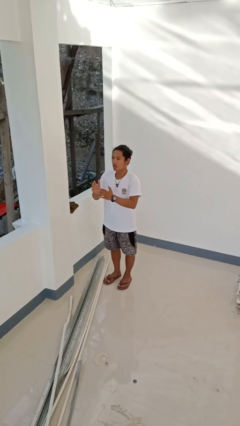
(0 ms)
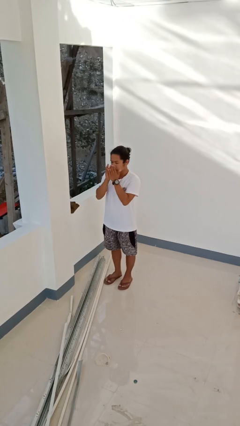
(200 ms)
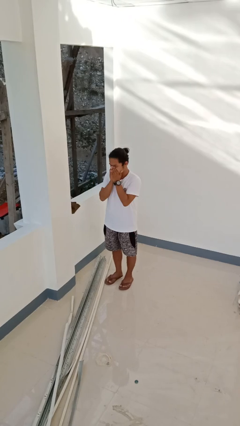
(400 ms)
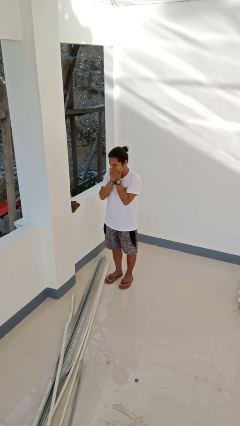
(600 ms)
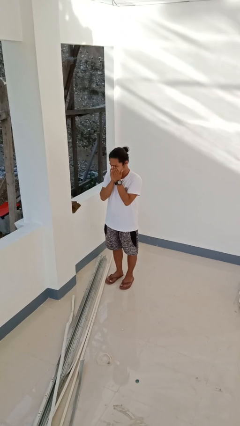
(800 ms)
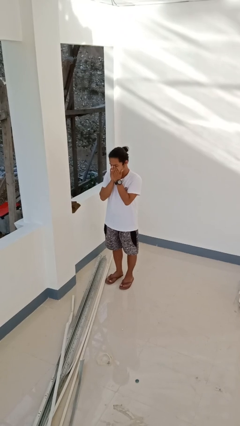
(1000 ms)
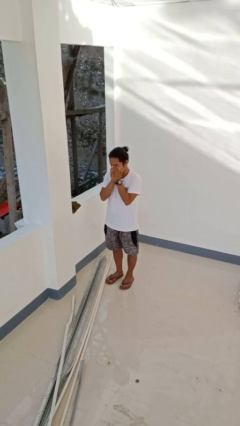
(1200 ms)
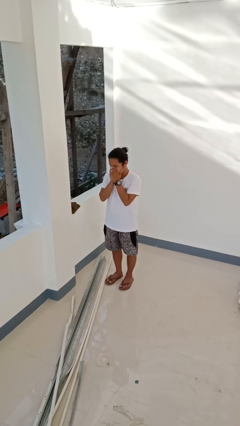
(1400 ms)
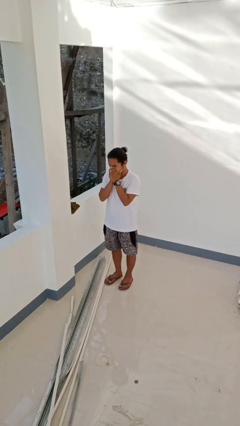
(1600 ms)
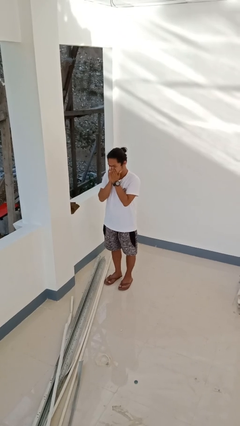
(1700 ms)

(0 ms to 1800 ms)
person sneezes into hand

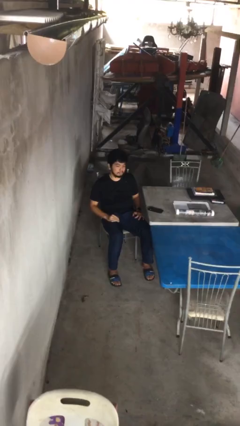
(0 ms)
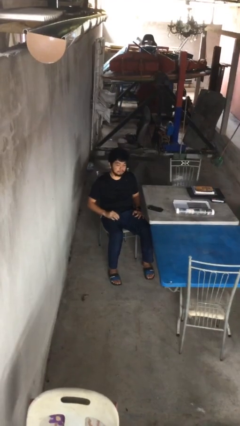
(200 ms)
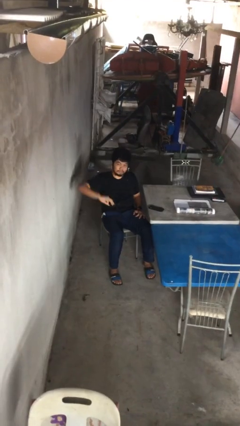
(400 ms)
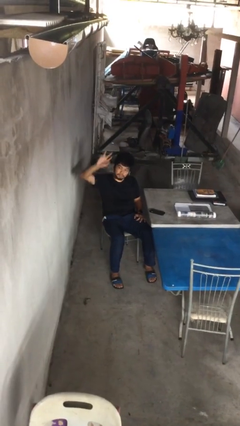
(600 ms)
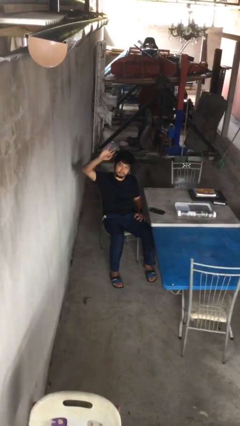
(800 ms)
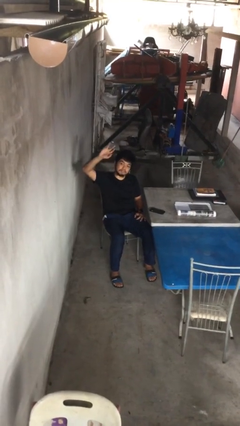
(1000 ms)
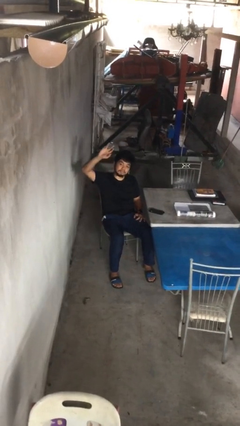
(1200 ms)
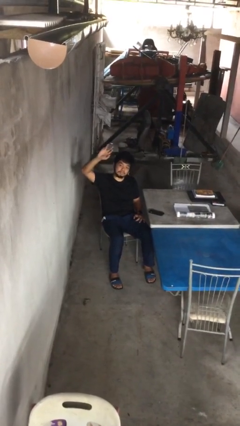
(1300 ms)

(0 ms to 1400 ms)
person gestures swipe up

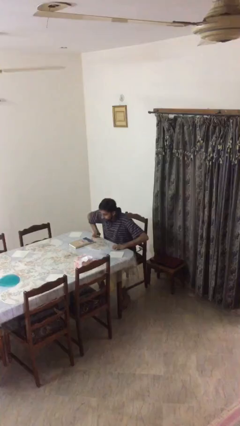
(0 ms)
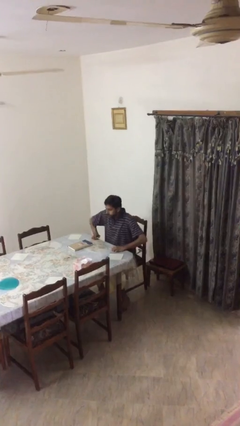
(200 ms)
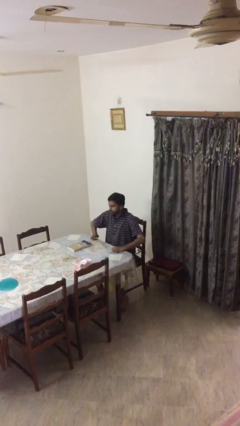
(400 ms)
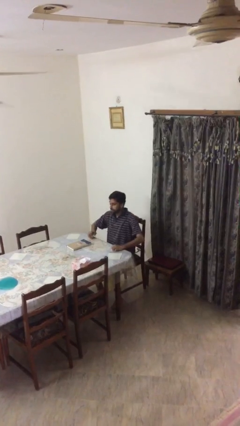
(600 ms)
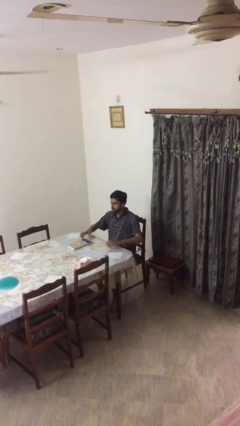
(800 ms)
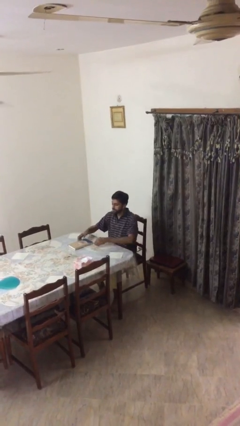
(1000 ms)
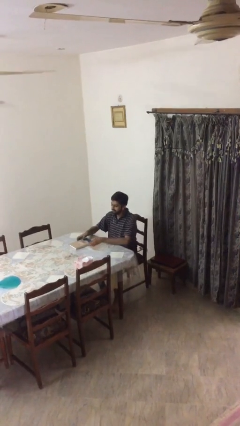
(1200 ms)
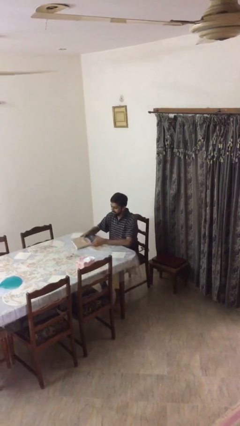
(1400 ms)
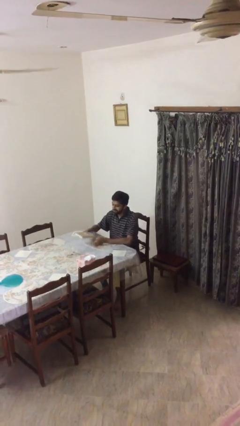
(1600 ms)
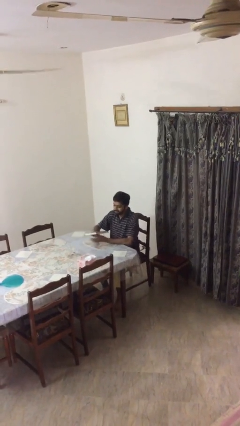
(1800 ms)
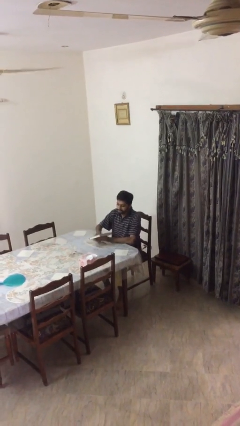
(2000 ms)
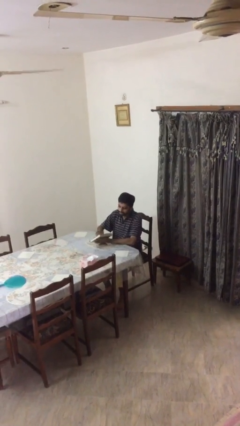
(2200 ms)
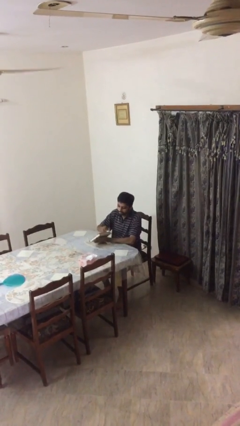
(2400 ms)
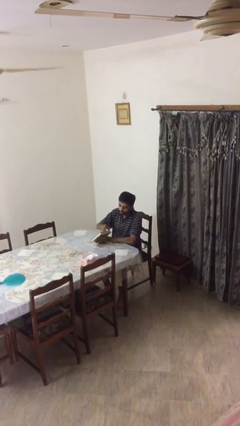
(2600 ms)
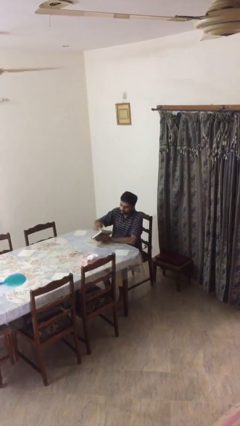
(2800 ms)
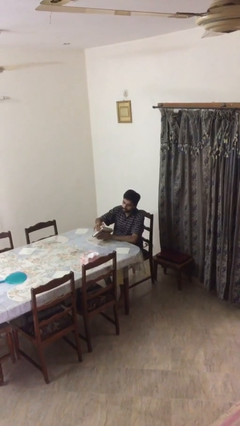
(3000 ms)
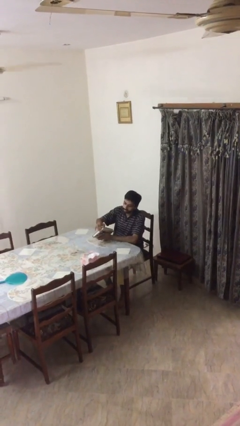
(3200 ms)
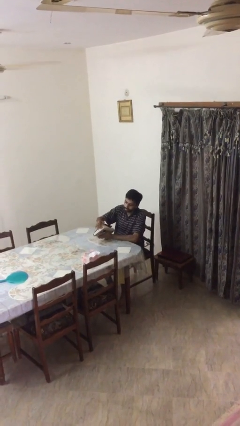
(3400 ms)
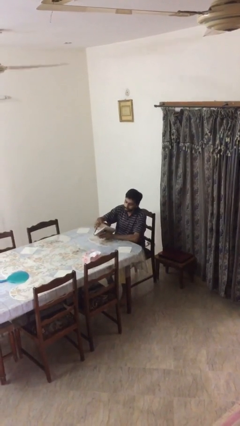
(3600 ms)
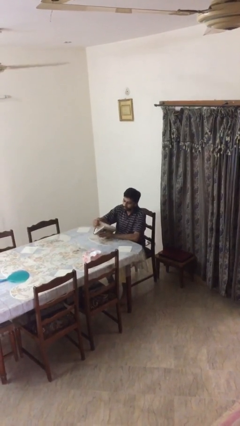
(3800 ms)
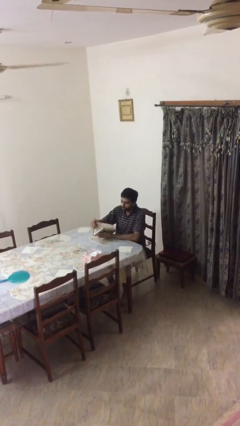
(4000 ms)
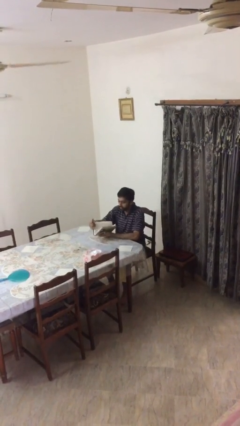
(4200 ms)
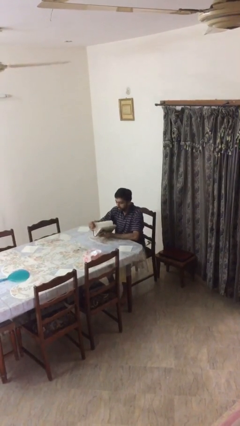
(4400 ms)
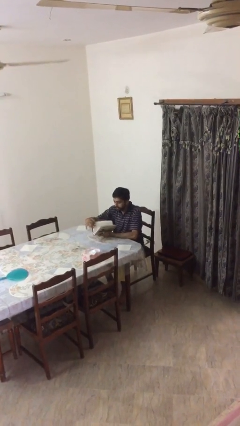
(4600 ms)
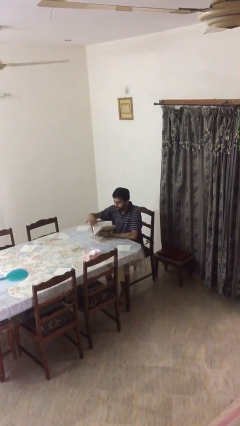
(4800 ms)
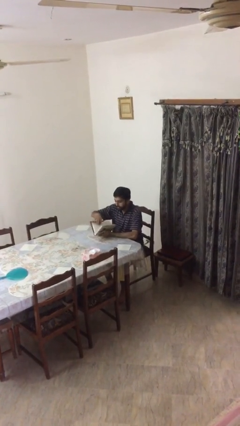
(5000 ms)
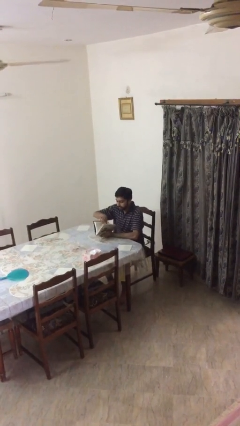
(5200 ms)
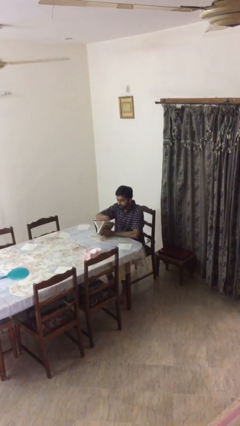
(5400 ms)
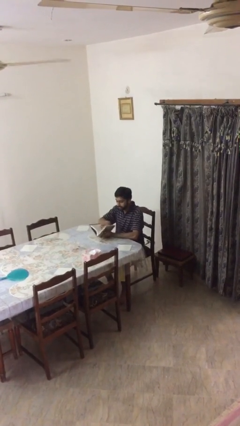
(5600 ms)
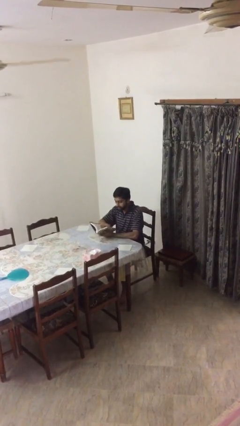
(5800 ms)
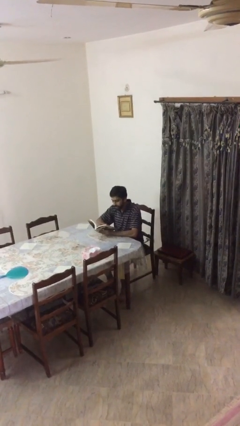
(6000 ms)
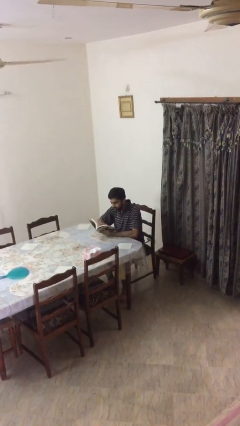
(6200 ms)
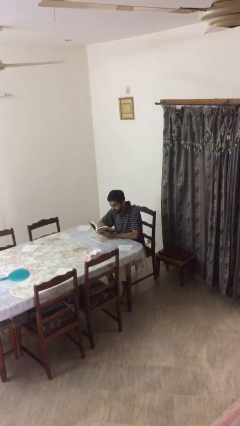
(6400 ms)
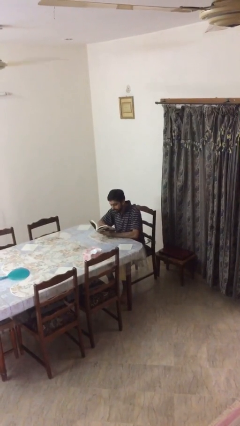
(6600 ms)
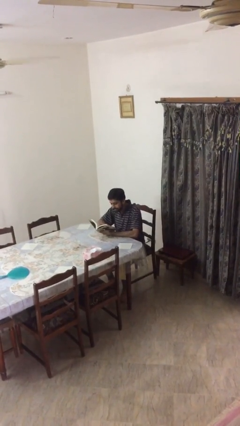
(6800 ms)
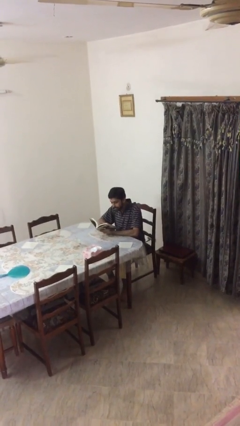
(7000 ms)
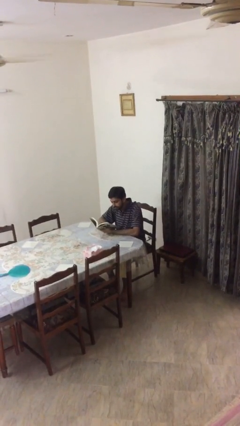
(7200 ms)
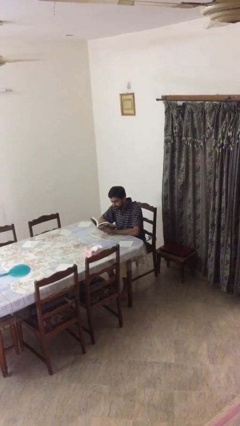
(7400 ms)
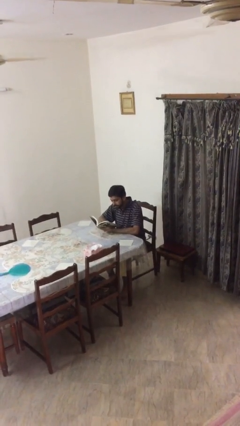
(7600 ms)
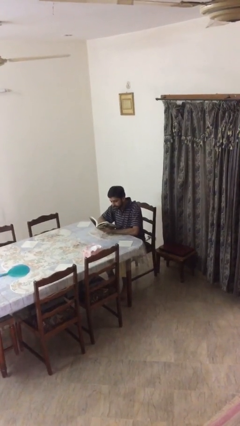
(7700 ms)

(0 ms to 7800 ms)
person reads document

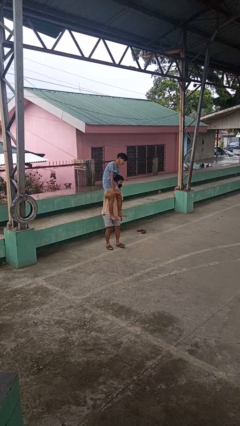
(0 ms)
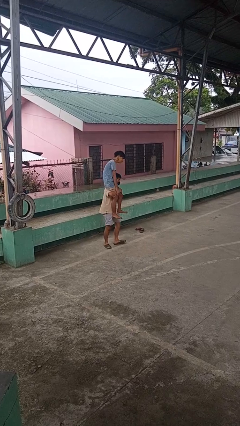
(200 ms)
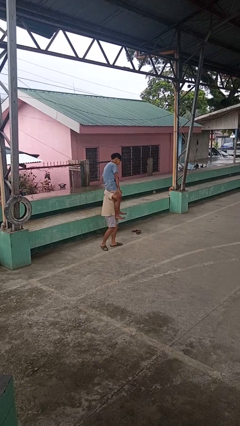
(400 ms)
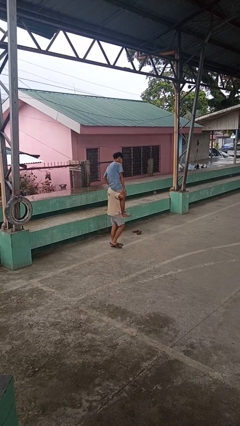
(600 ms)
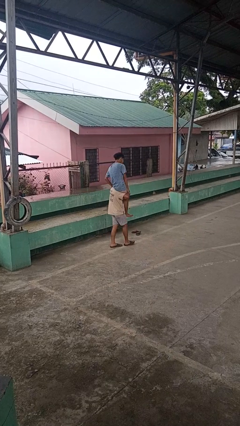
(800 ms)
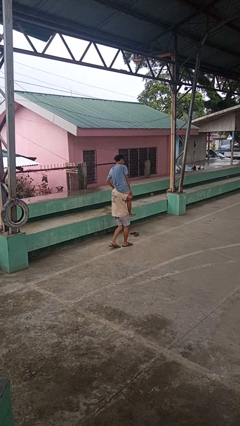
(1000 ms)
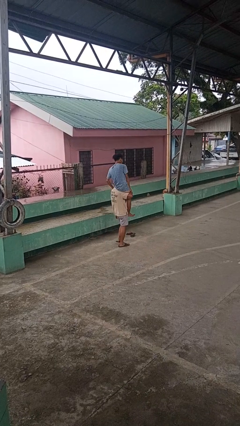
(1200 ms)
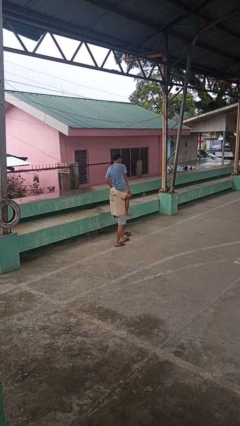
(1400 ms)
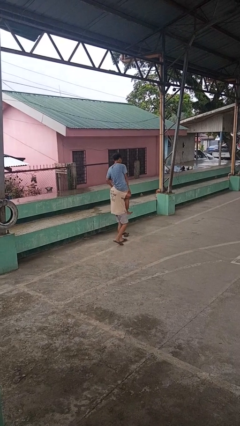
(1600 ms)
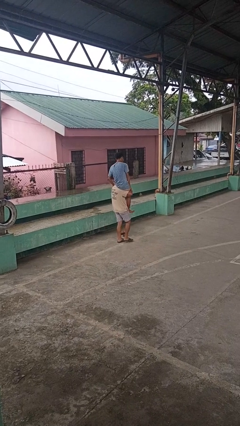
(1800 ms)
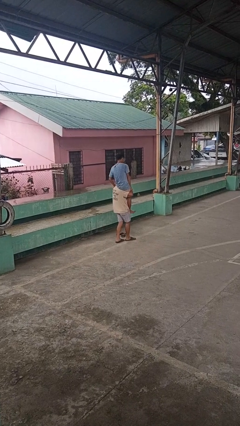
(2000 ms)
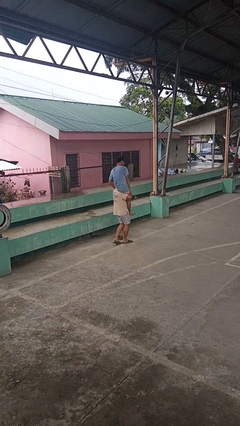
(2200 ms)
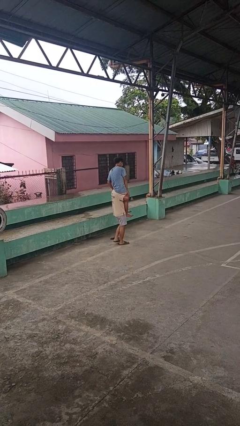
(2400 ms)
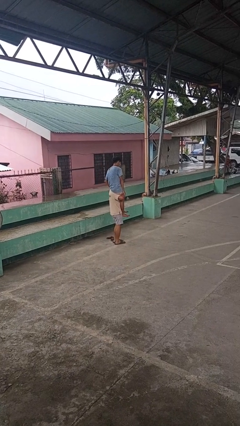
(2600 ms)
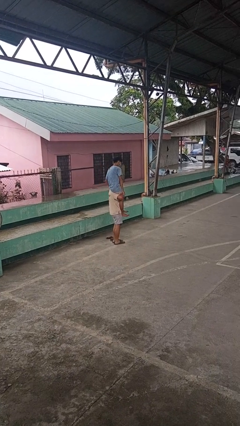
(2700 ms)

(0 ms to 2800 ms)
person carries person on shoulders

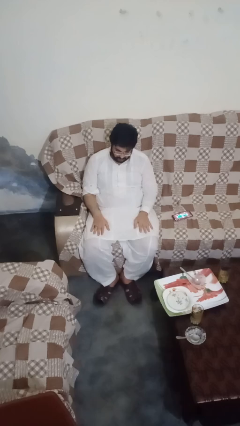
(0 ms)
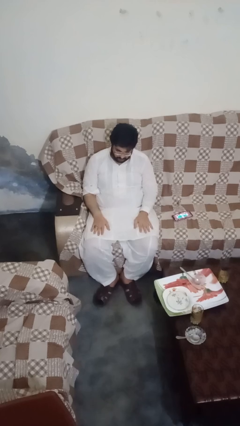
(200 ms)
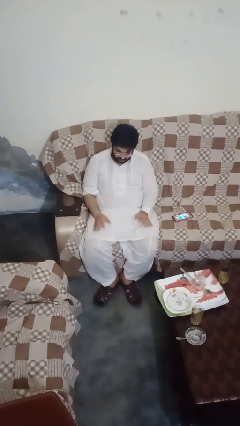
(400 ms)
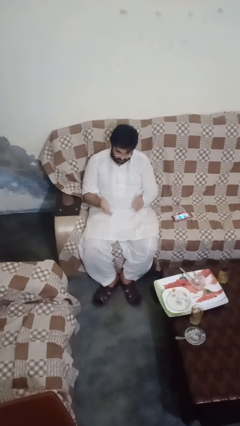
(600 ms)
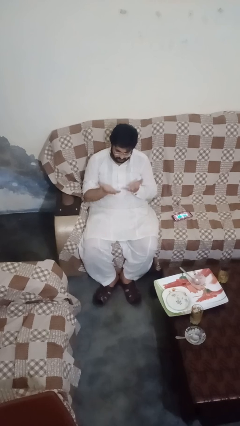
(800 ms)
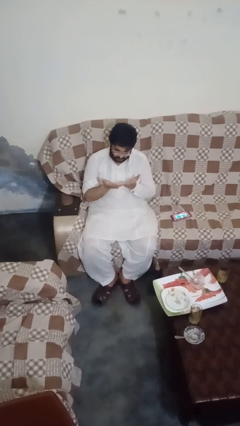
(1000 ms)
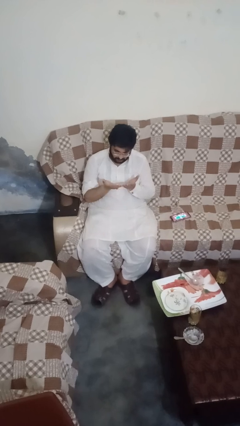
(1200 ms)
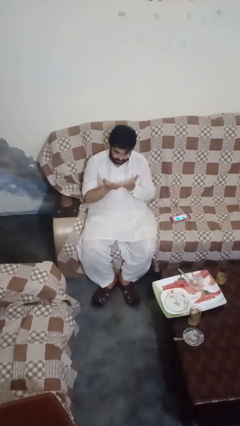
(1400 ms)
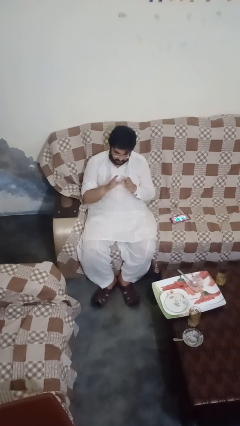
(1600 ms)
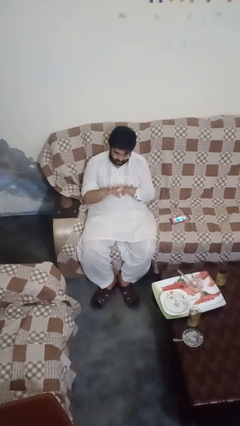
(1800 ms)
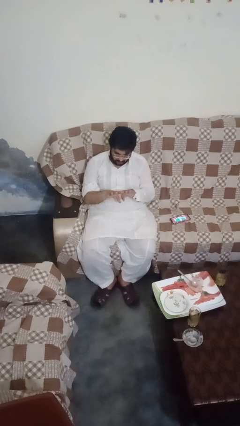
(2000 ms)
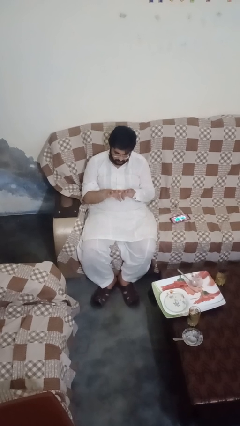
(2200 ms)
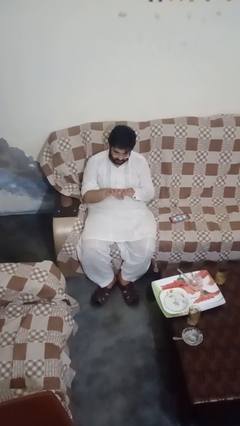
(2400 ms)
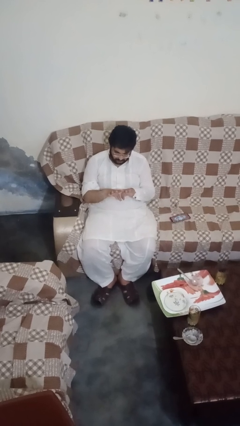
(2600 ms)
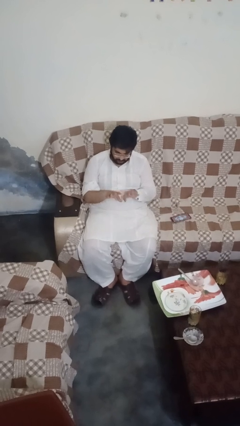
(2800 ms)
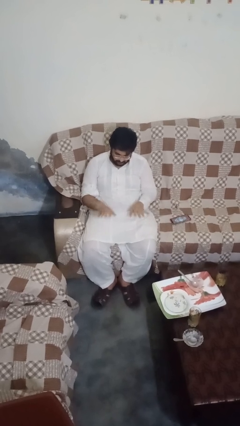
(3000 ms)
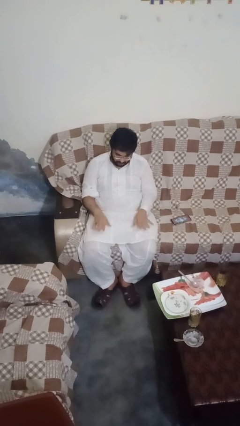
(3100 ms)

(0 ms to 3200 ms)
person looks at hands in lap

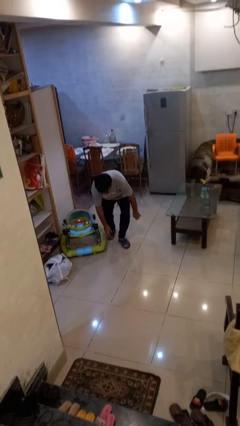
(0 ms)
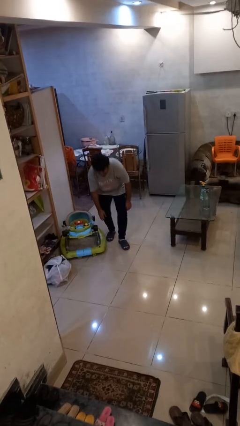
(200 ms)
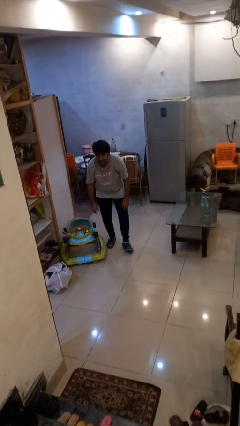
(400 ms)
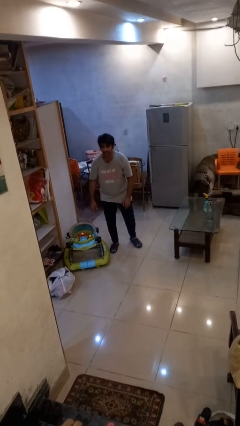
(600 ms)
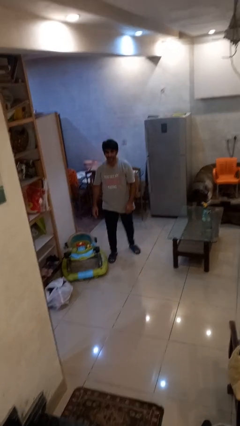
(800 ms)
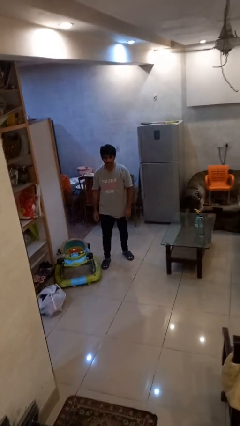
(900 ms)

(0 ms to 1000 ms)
person stands up from floor
